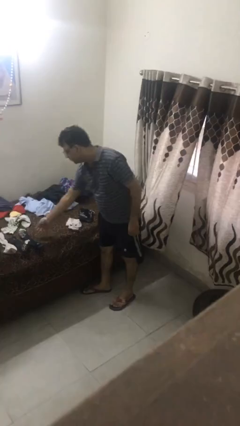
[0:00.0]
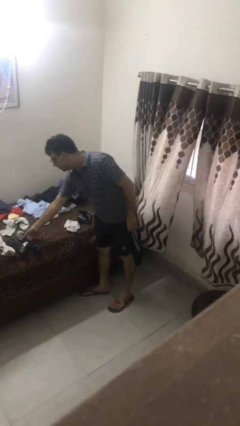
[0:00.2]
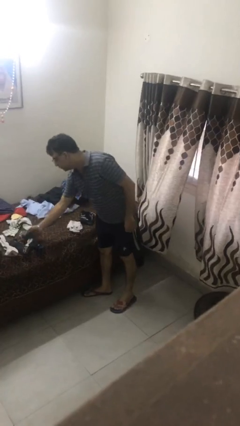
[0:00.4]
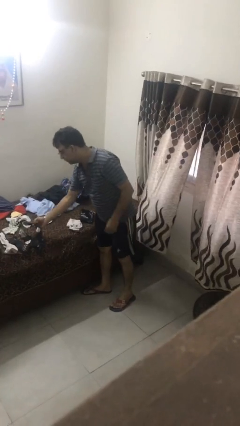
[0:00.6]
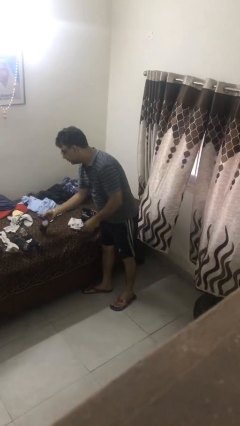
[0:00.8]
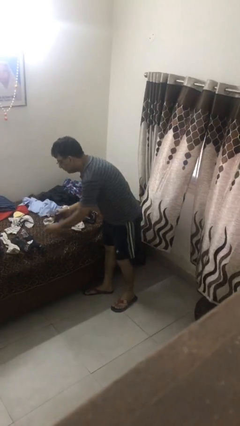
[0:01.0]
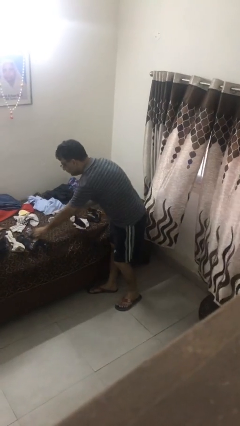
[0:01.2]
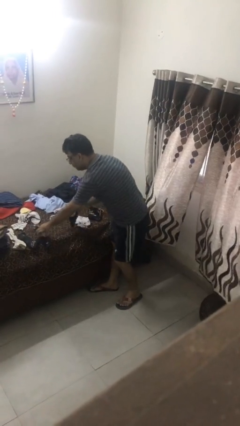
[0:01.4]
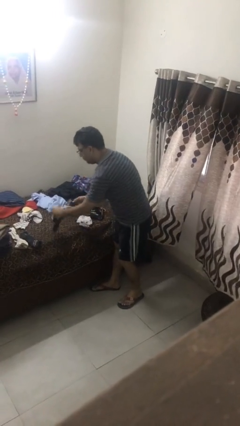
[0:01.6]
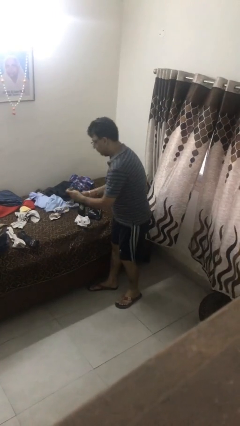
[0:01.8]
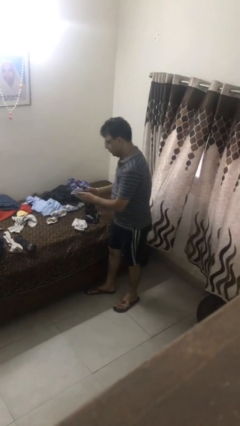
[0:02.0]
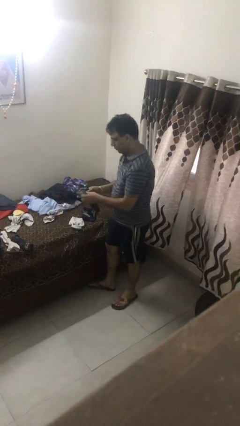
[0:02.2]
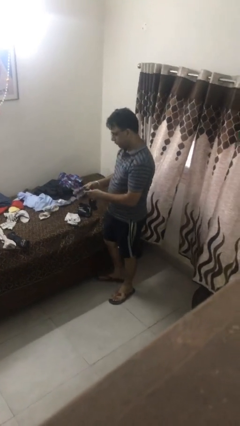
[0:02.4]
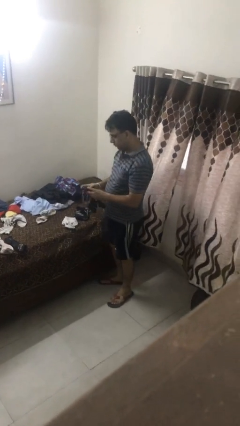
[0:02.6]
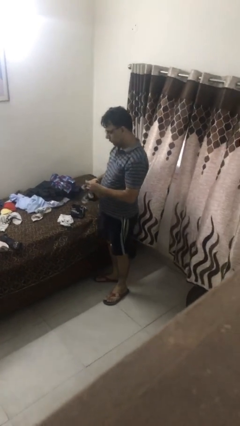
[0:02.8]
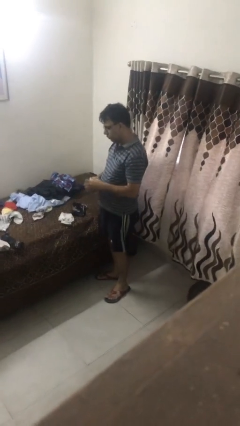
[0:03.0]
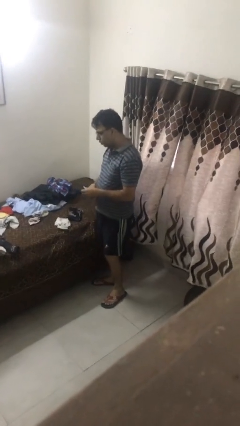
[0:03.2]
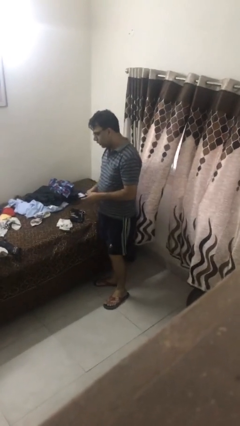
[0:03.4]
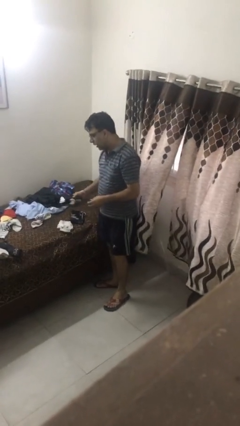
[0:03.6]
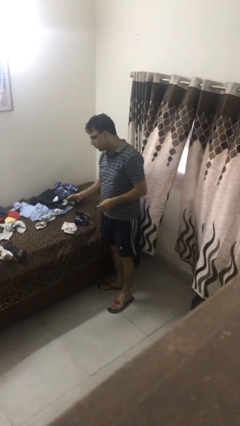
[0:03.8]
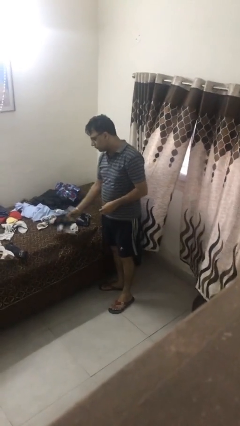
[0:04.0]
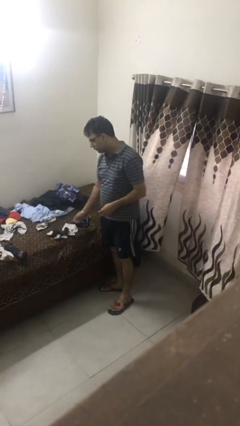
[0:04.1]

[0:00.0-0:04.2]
person folds socks

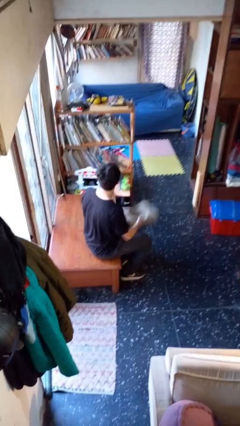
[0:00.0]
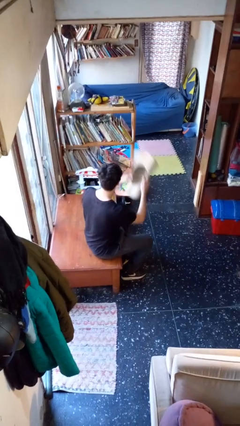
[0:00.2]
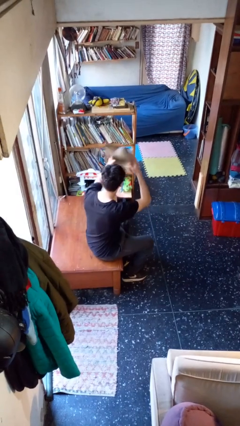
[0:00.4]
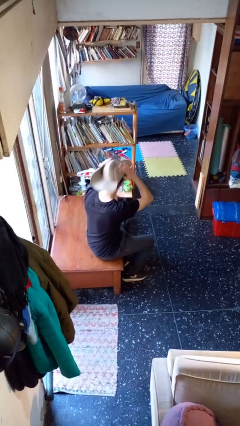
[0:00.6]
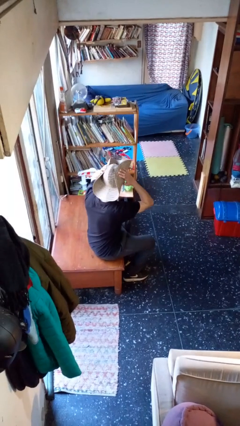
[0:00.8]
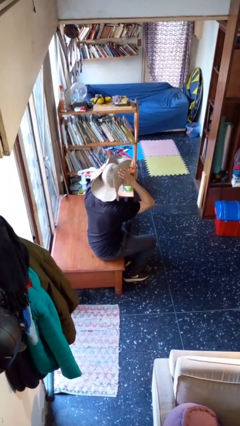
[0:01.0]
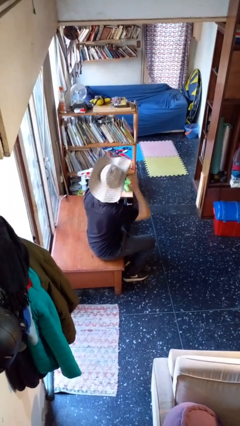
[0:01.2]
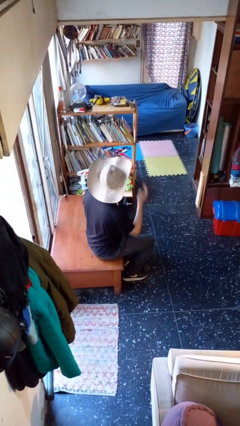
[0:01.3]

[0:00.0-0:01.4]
person puts on hat

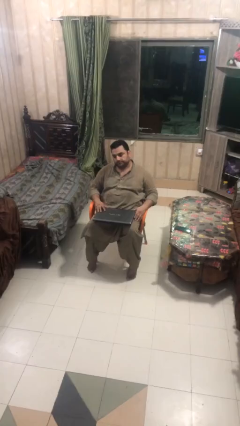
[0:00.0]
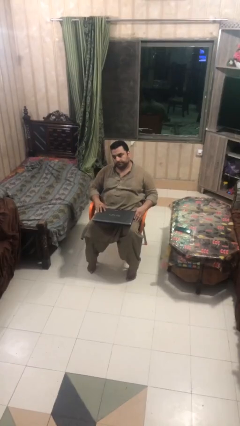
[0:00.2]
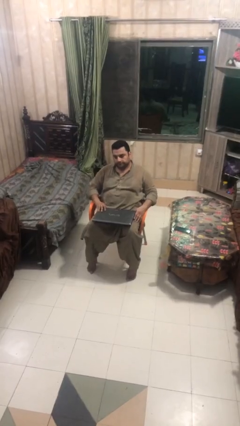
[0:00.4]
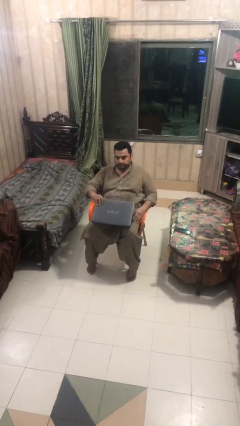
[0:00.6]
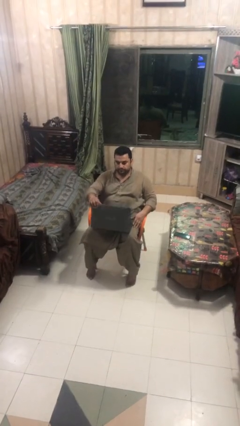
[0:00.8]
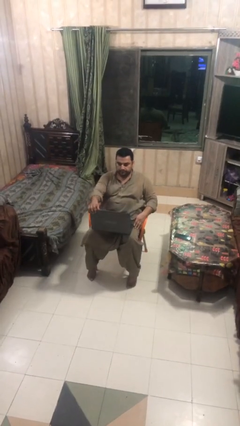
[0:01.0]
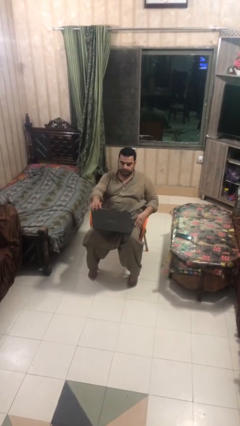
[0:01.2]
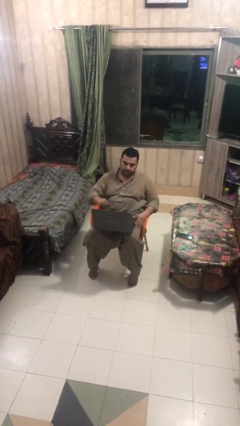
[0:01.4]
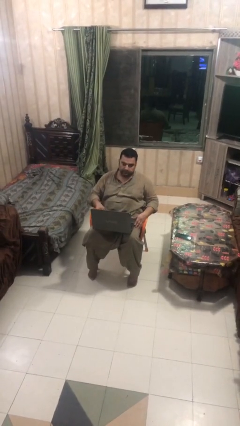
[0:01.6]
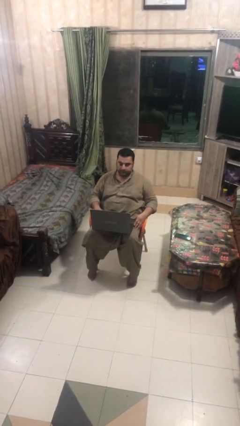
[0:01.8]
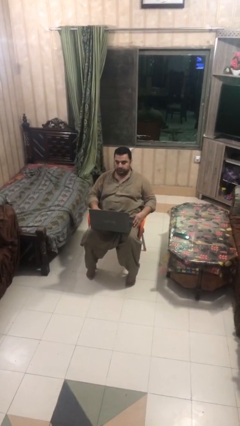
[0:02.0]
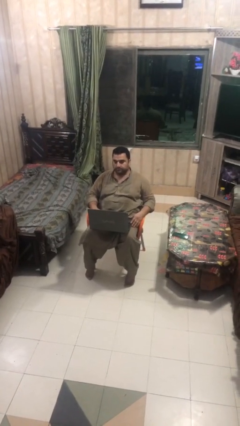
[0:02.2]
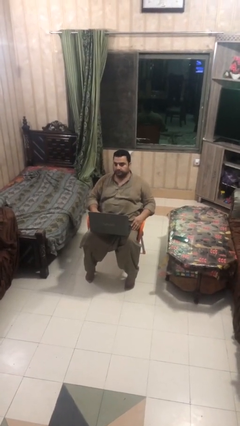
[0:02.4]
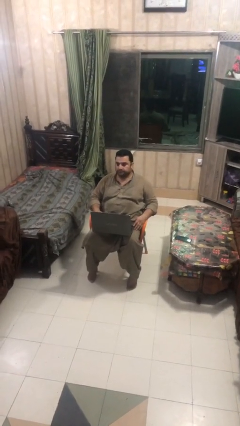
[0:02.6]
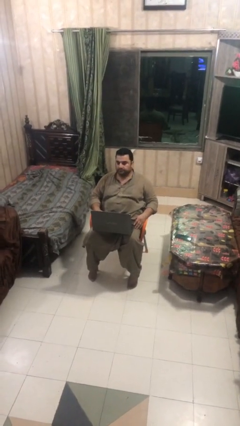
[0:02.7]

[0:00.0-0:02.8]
person opens laptop

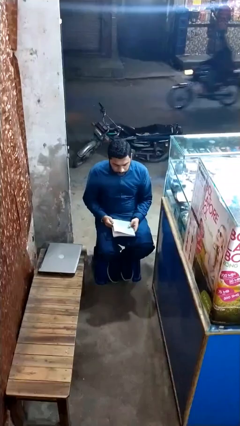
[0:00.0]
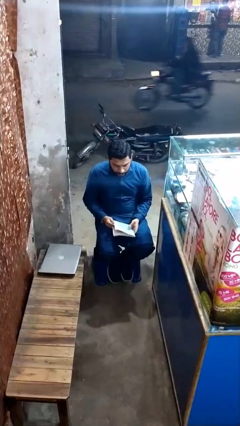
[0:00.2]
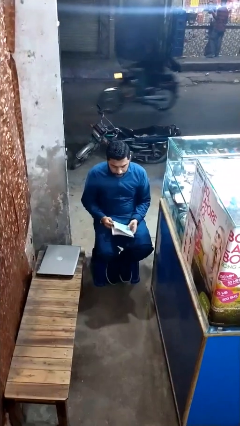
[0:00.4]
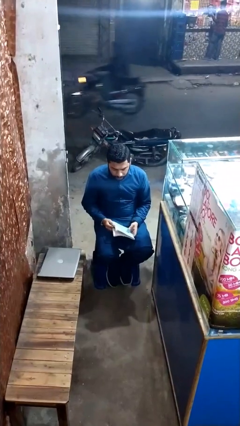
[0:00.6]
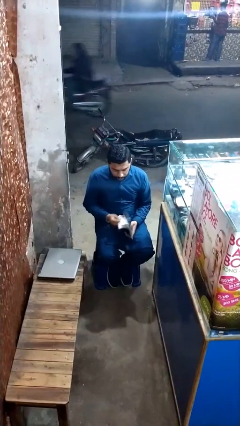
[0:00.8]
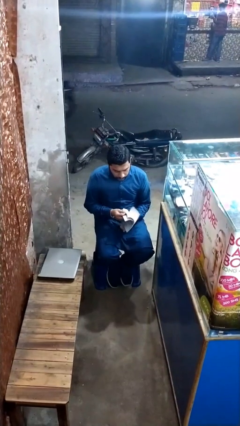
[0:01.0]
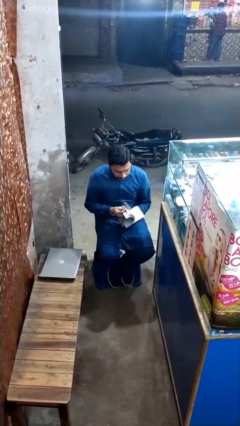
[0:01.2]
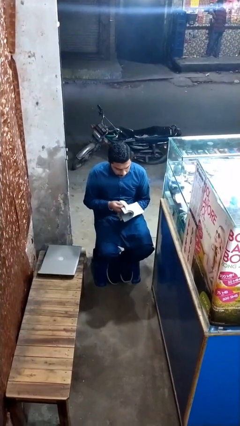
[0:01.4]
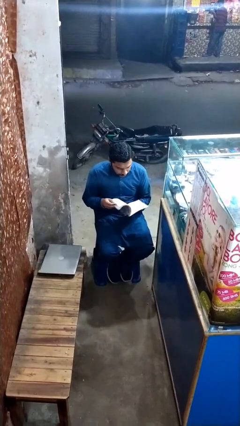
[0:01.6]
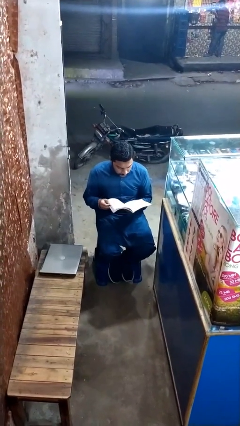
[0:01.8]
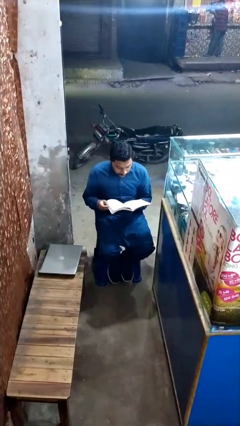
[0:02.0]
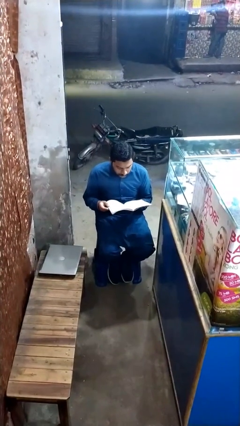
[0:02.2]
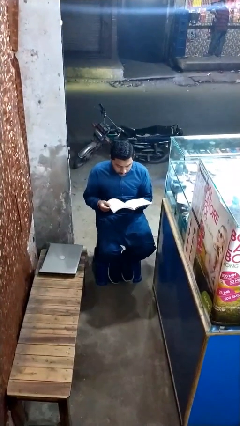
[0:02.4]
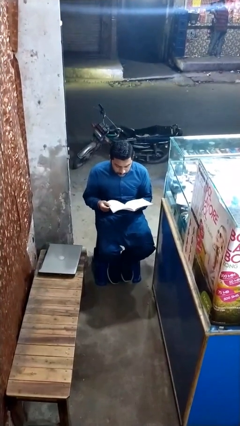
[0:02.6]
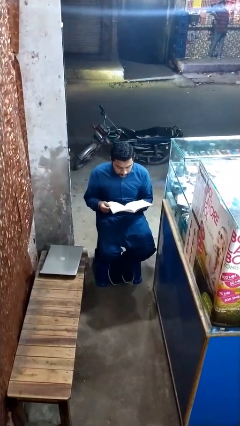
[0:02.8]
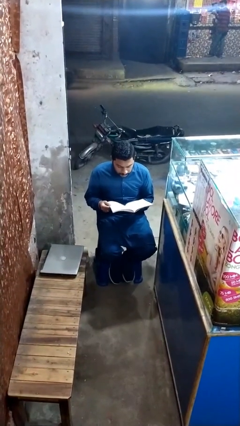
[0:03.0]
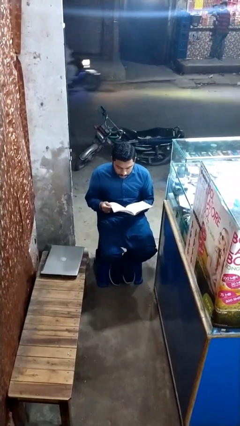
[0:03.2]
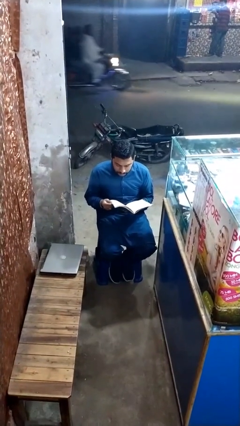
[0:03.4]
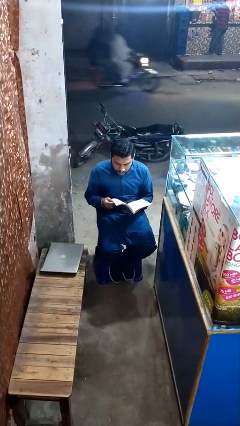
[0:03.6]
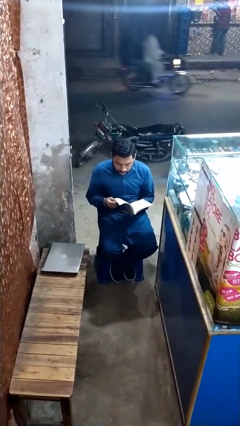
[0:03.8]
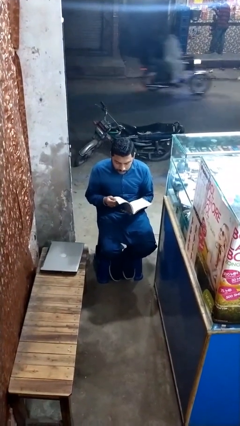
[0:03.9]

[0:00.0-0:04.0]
person reads document

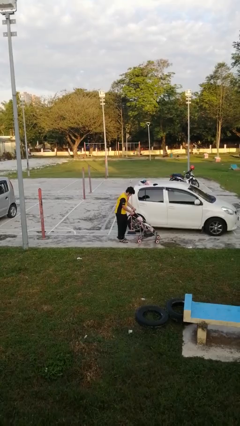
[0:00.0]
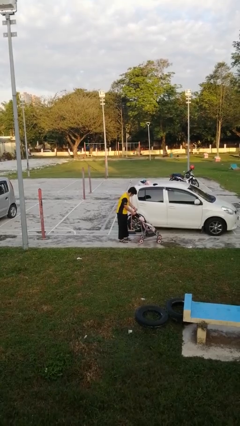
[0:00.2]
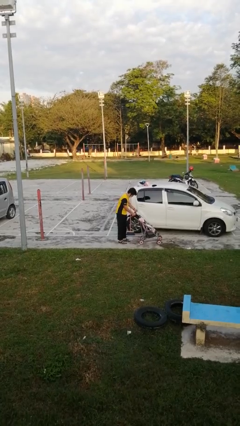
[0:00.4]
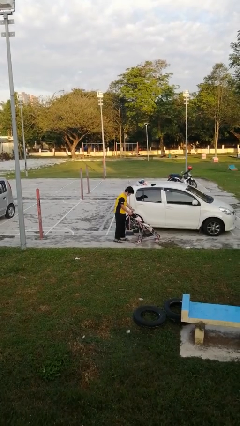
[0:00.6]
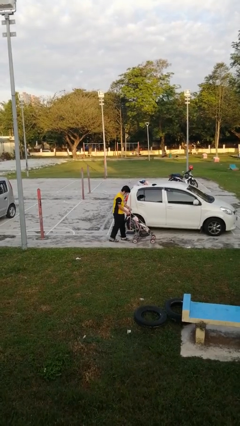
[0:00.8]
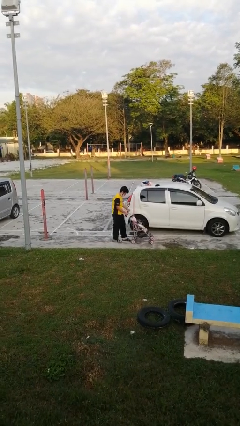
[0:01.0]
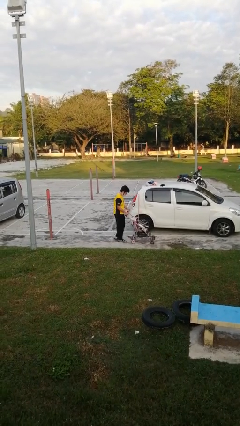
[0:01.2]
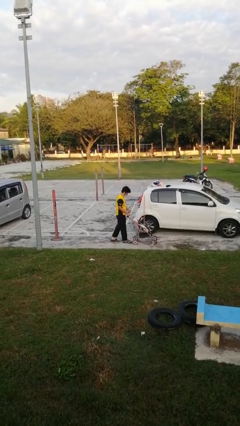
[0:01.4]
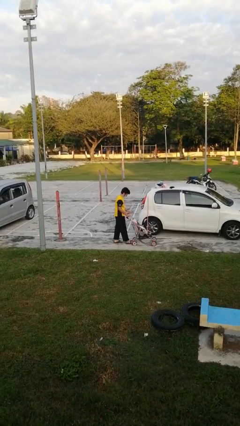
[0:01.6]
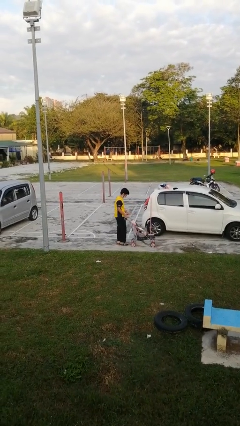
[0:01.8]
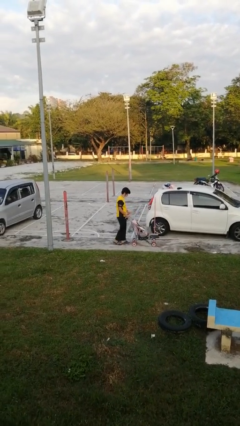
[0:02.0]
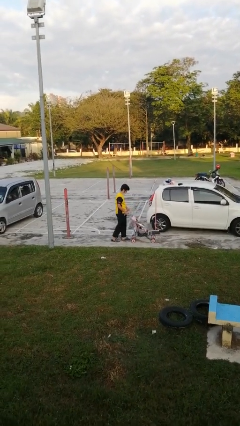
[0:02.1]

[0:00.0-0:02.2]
person pulls wheeled cart

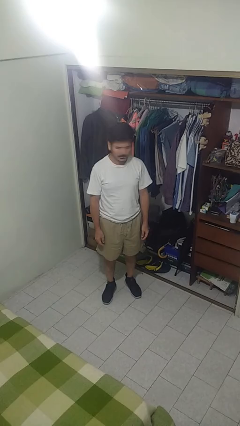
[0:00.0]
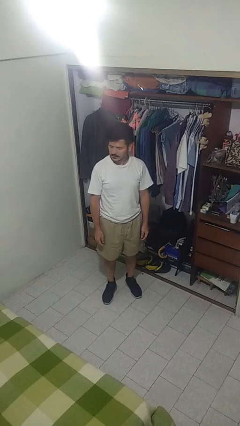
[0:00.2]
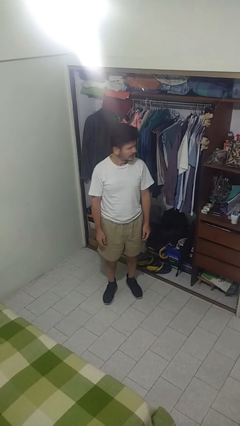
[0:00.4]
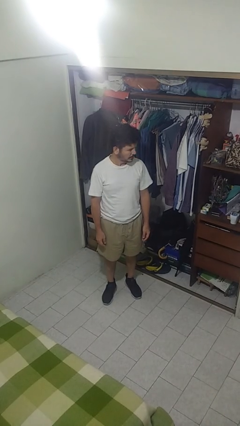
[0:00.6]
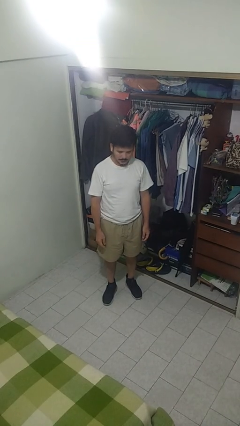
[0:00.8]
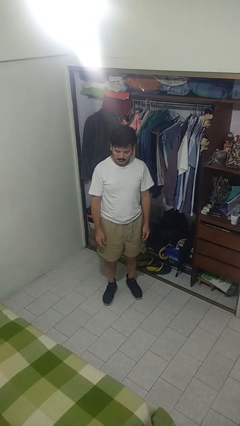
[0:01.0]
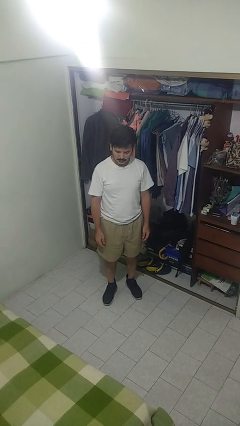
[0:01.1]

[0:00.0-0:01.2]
person shakes head

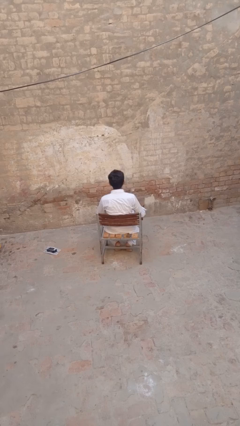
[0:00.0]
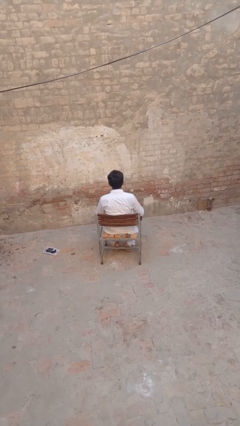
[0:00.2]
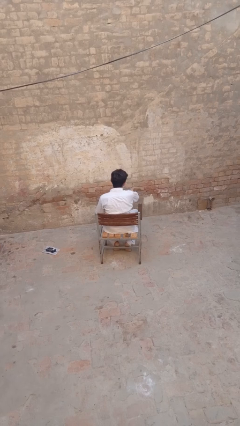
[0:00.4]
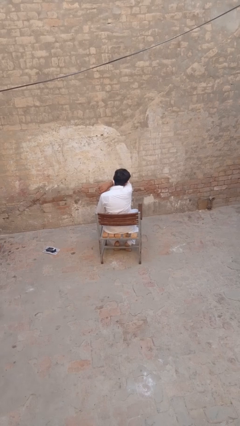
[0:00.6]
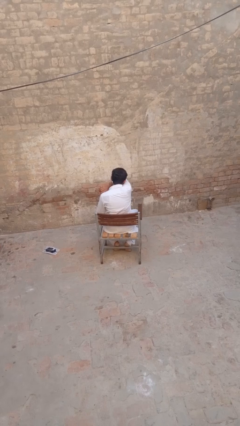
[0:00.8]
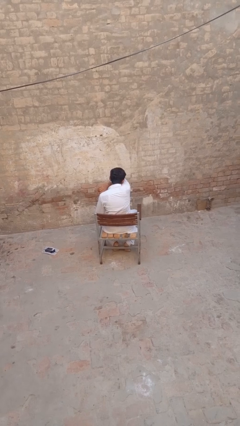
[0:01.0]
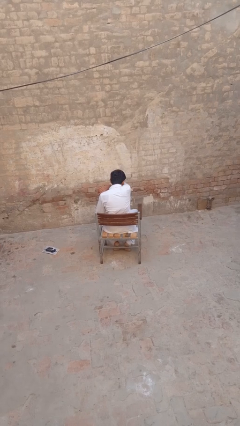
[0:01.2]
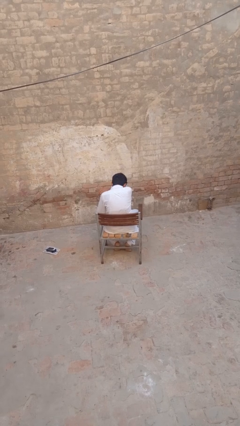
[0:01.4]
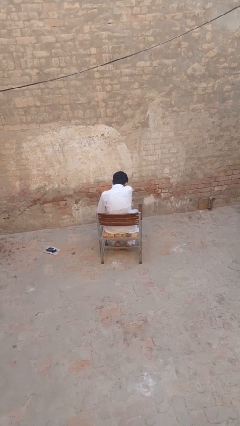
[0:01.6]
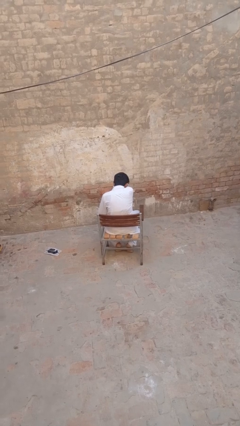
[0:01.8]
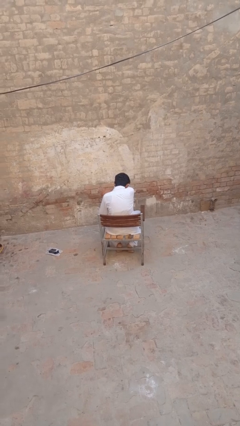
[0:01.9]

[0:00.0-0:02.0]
person sneezes into arm
